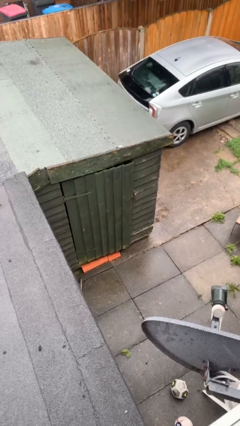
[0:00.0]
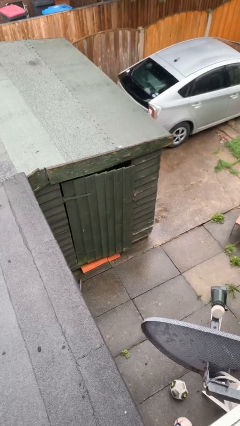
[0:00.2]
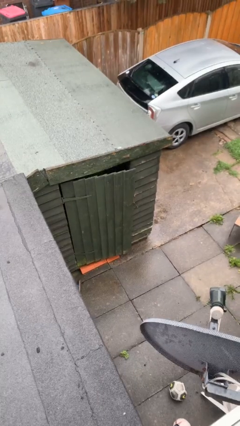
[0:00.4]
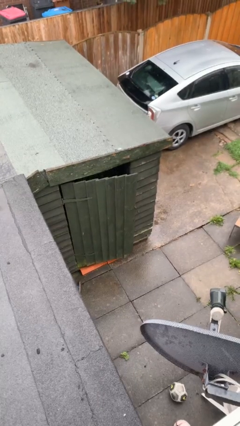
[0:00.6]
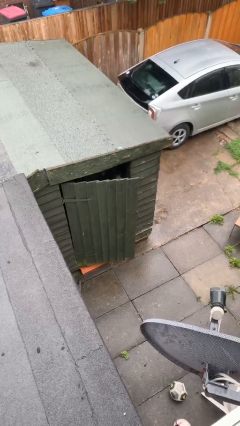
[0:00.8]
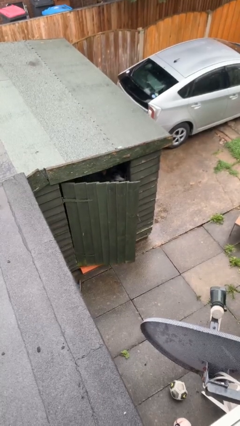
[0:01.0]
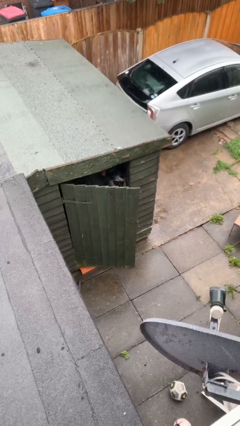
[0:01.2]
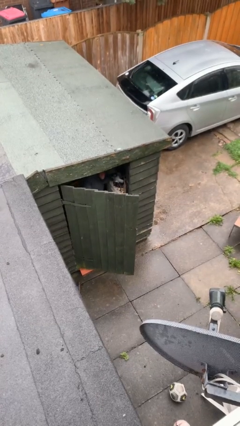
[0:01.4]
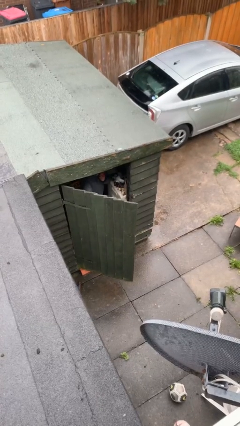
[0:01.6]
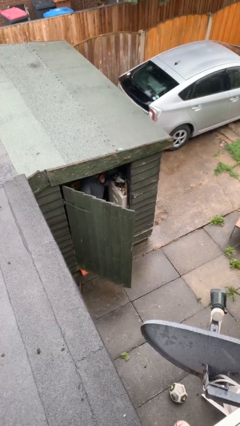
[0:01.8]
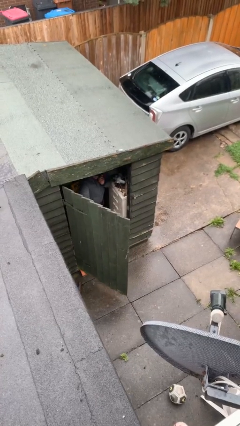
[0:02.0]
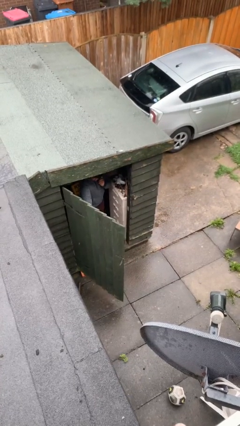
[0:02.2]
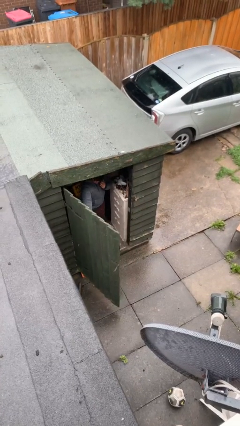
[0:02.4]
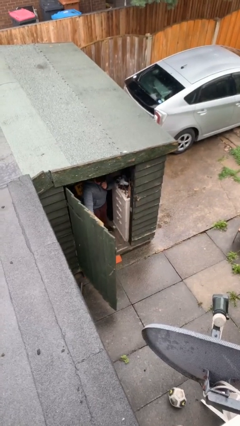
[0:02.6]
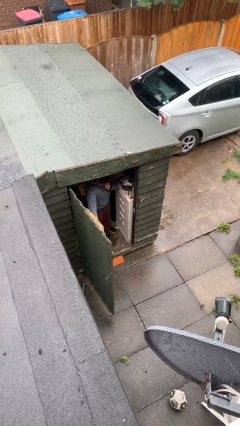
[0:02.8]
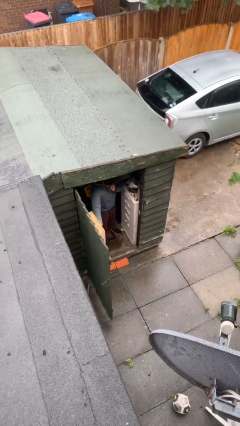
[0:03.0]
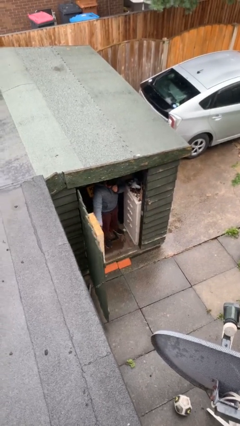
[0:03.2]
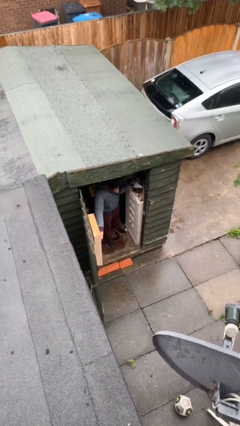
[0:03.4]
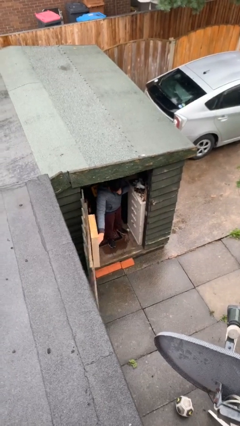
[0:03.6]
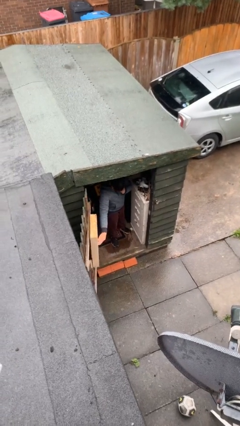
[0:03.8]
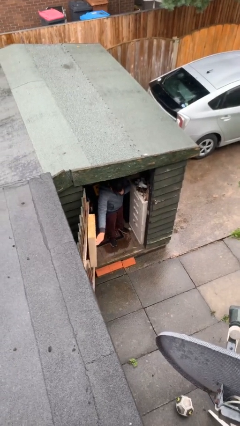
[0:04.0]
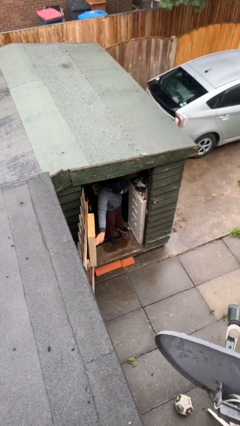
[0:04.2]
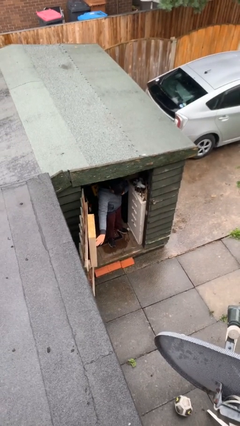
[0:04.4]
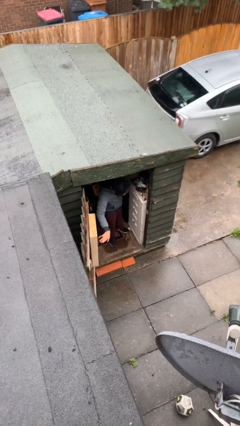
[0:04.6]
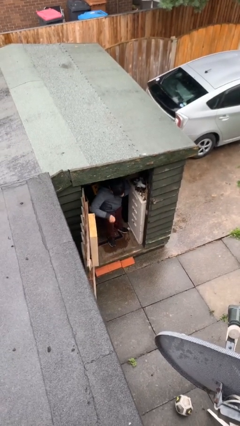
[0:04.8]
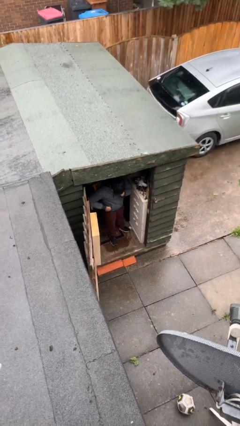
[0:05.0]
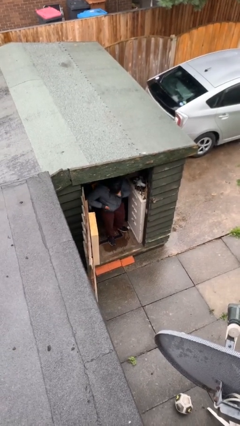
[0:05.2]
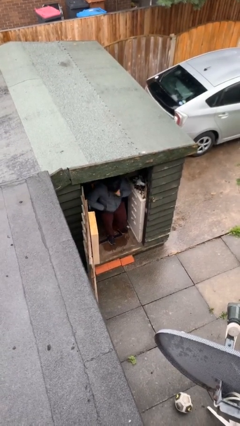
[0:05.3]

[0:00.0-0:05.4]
person opens facility door

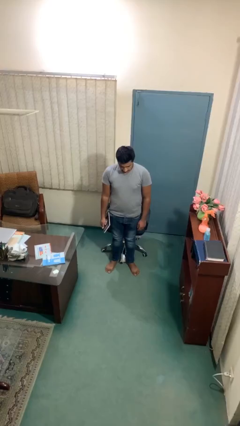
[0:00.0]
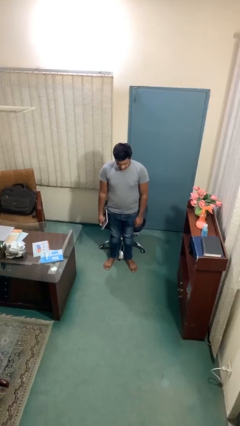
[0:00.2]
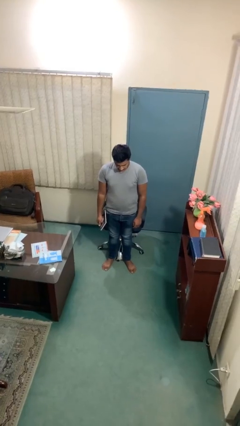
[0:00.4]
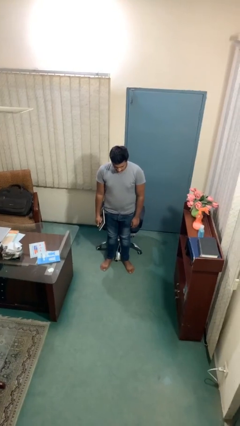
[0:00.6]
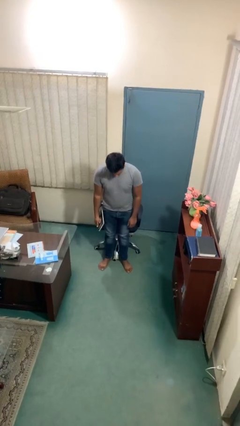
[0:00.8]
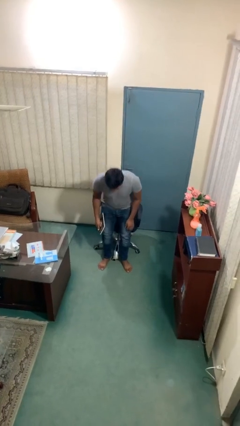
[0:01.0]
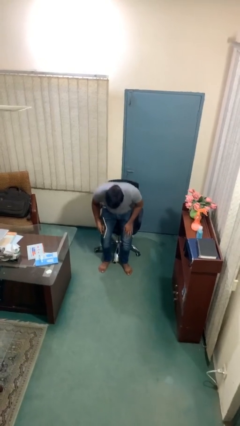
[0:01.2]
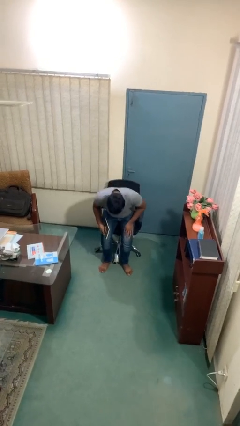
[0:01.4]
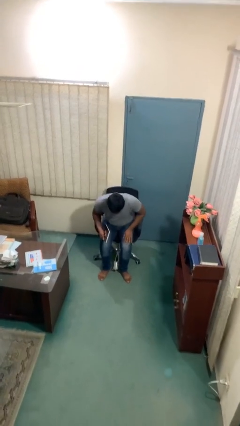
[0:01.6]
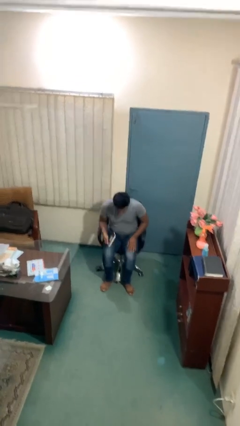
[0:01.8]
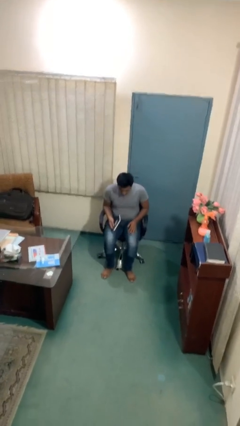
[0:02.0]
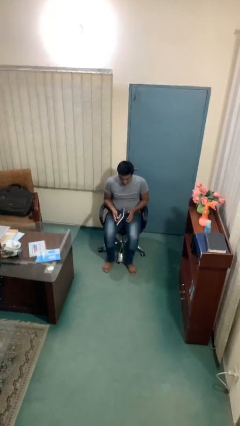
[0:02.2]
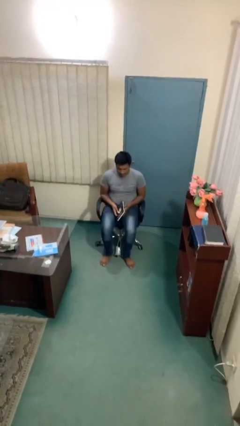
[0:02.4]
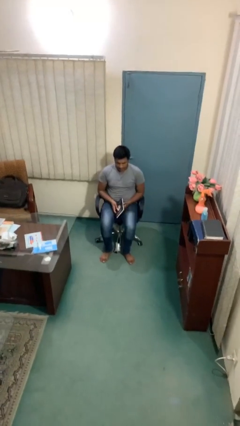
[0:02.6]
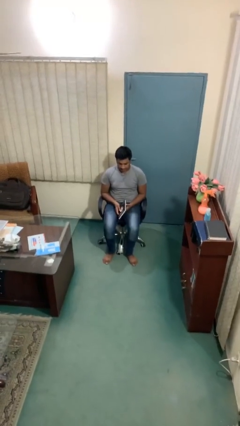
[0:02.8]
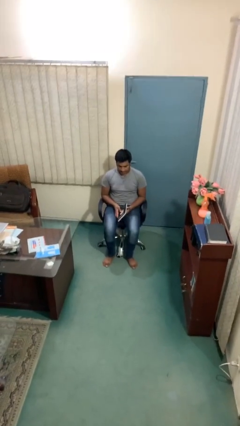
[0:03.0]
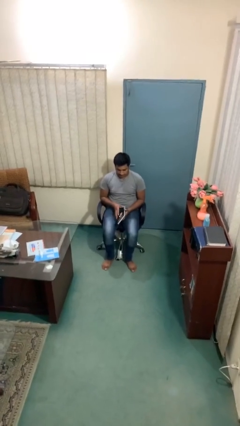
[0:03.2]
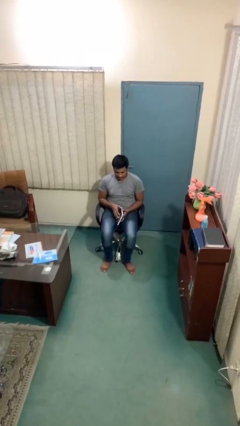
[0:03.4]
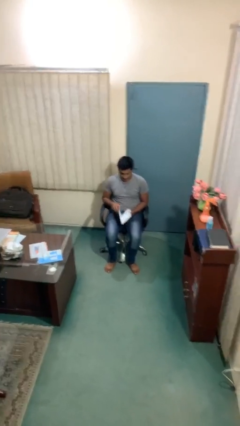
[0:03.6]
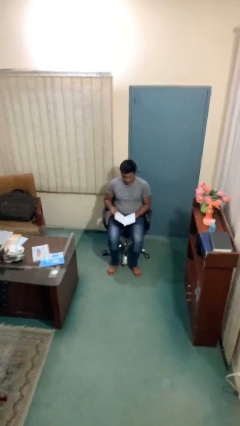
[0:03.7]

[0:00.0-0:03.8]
person sits down

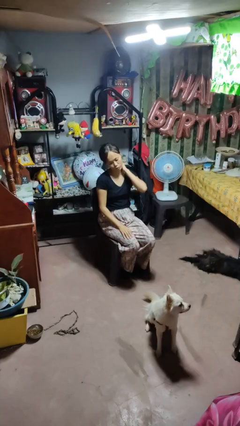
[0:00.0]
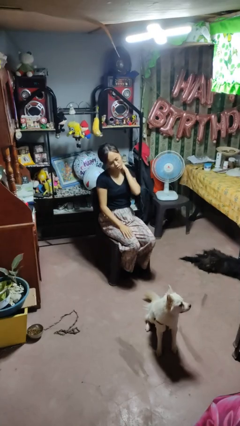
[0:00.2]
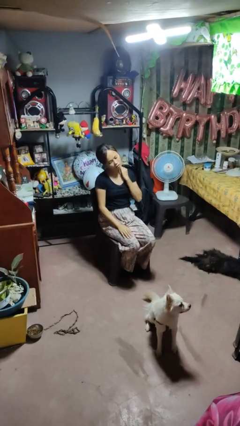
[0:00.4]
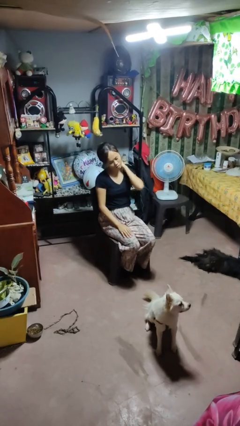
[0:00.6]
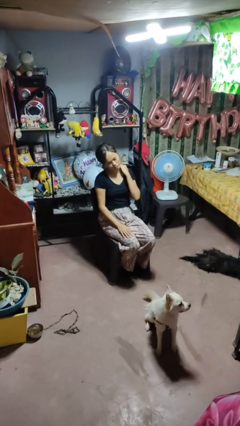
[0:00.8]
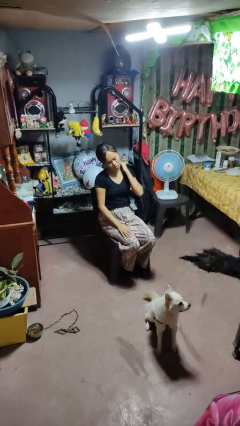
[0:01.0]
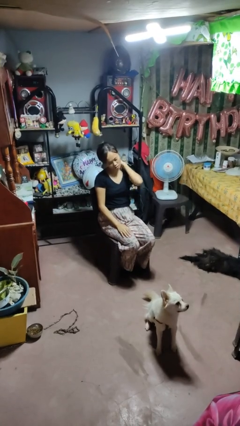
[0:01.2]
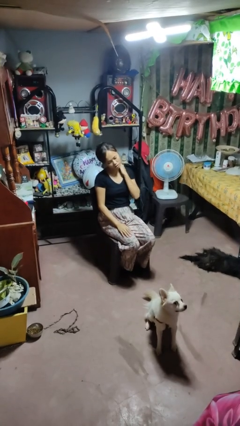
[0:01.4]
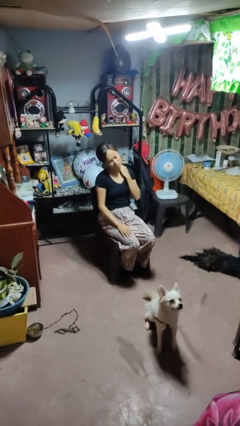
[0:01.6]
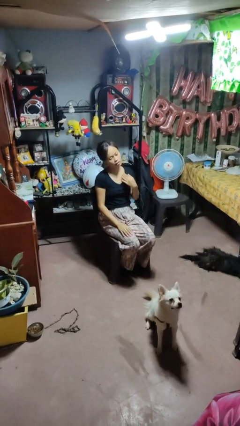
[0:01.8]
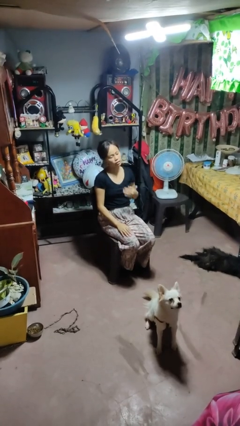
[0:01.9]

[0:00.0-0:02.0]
person rubs neck

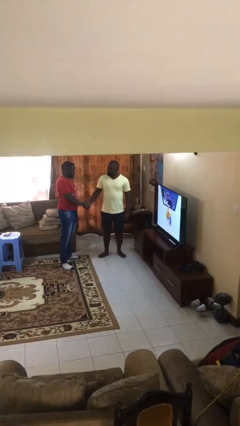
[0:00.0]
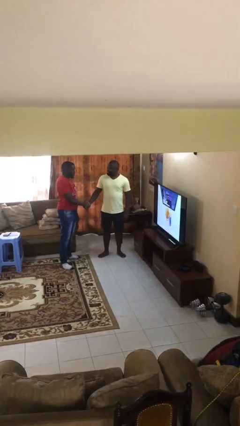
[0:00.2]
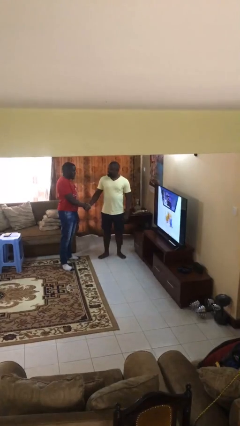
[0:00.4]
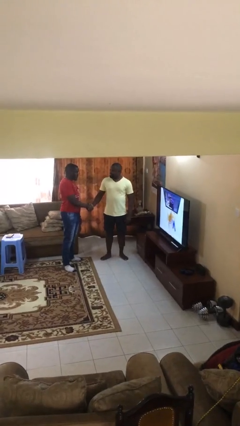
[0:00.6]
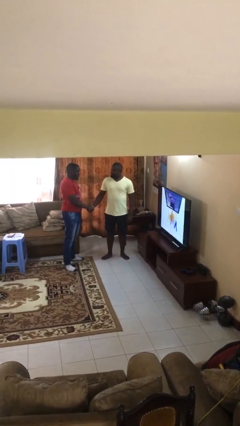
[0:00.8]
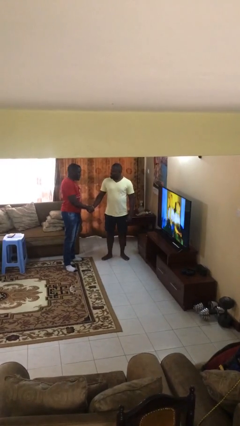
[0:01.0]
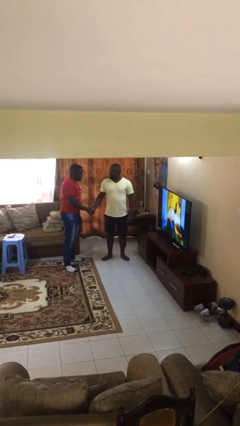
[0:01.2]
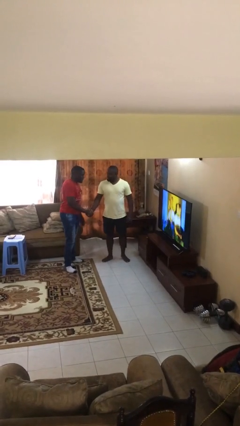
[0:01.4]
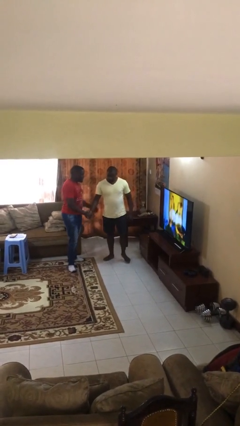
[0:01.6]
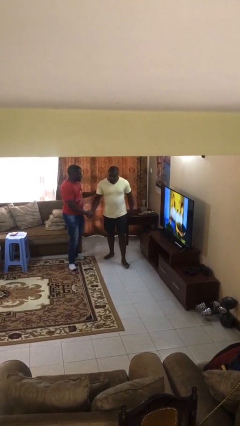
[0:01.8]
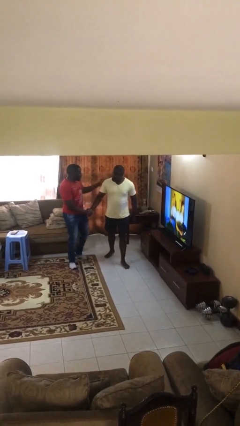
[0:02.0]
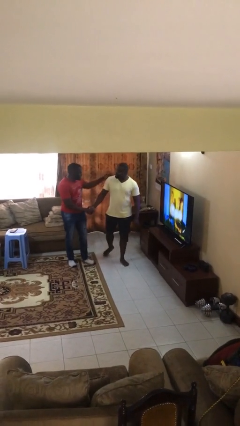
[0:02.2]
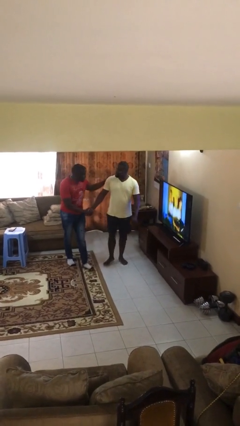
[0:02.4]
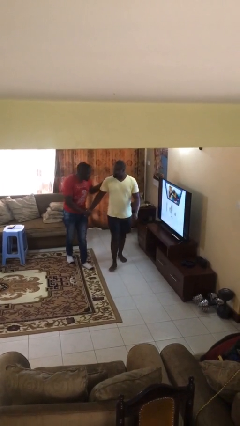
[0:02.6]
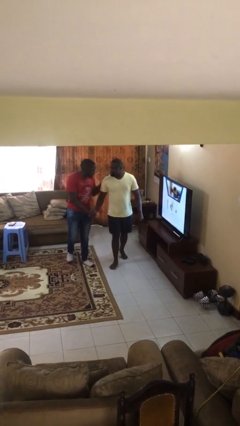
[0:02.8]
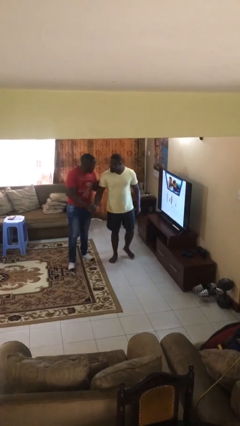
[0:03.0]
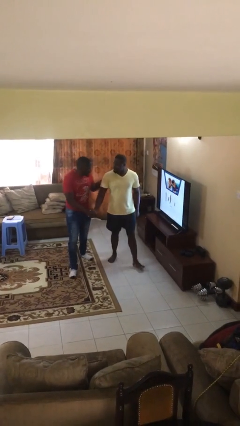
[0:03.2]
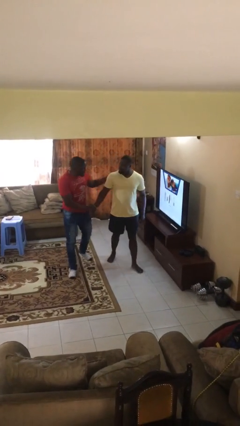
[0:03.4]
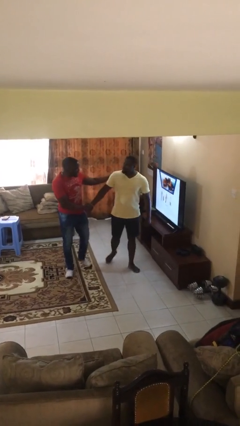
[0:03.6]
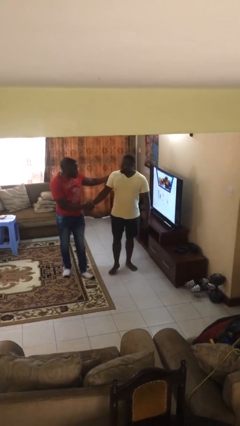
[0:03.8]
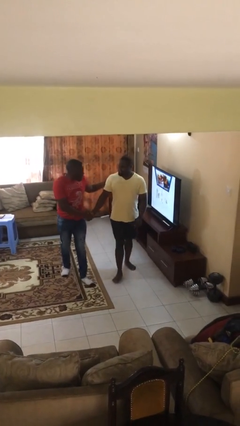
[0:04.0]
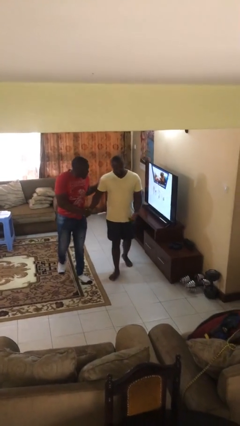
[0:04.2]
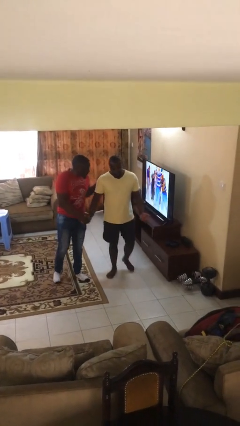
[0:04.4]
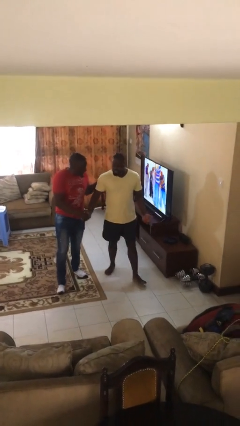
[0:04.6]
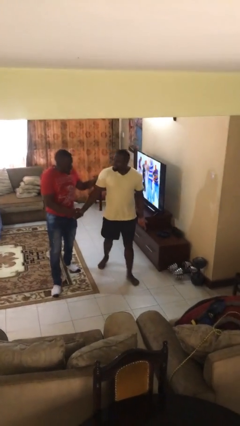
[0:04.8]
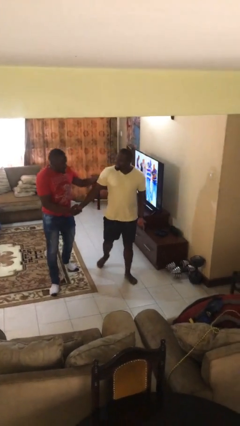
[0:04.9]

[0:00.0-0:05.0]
person holds hand

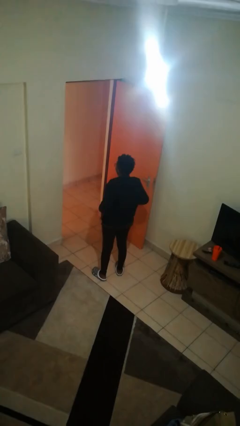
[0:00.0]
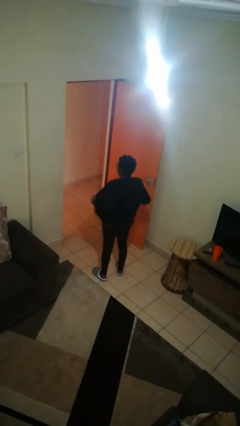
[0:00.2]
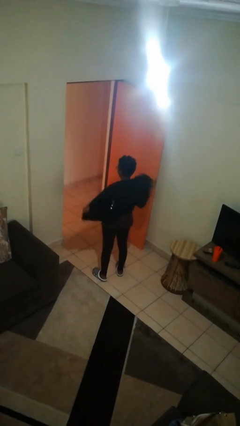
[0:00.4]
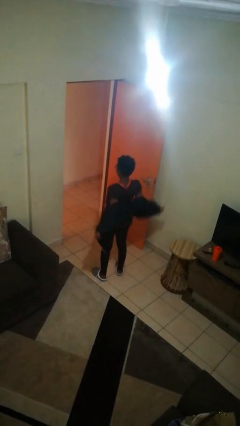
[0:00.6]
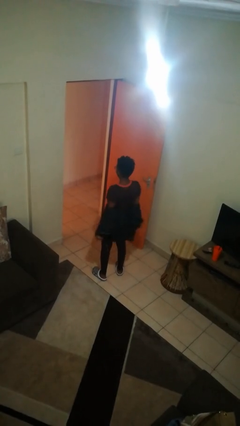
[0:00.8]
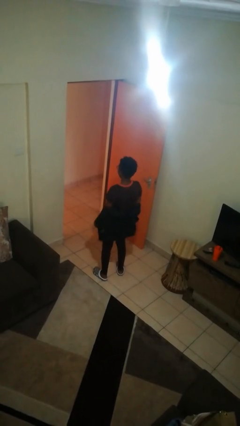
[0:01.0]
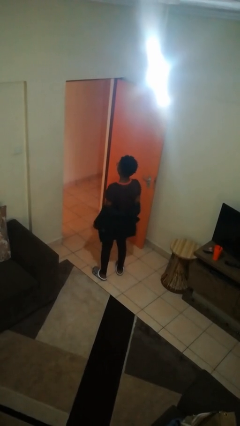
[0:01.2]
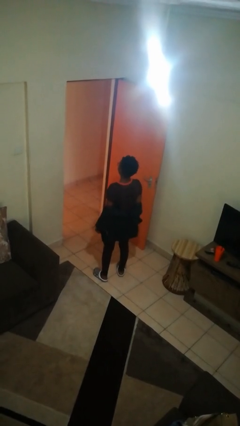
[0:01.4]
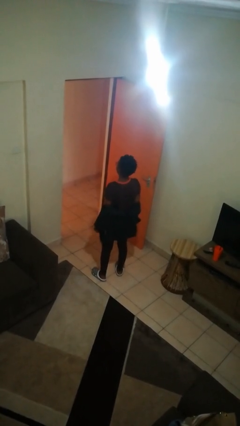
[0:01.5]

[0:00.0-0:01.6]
person takes off jacket
